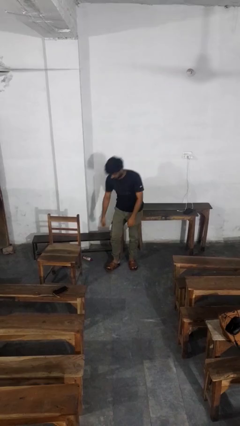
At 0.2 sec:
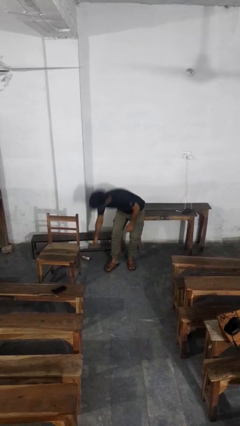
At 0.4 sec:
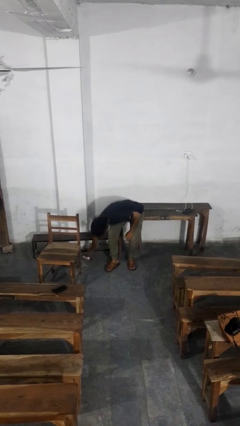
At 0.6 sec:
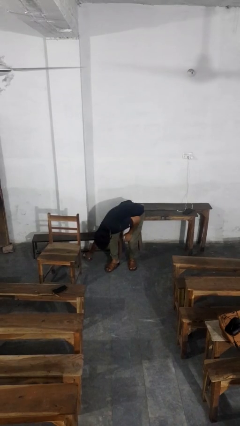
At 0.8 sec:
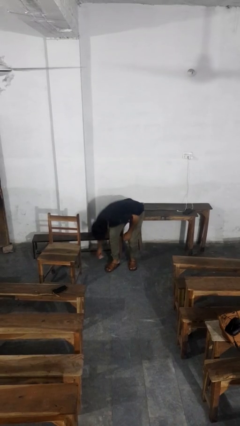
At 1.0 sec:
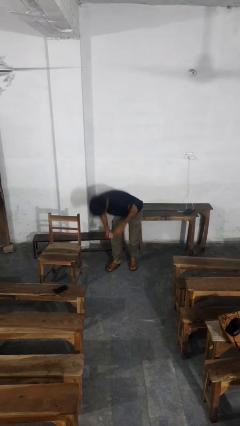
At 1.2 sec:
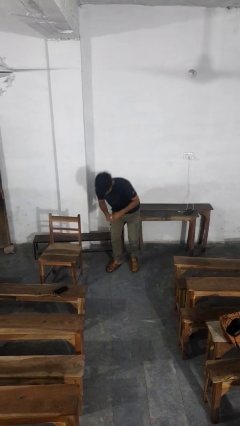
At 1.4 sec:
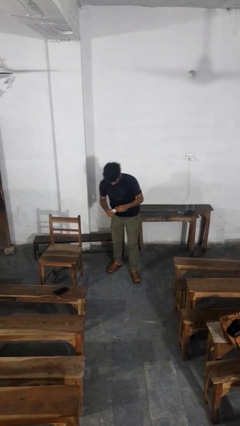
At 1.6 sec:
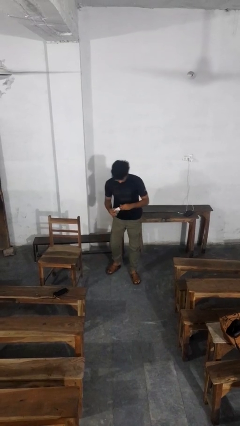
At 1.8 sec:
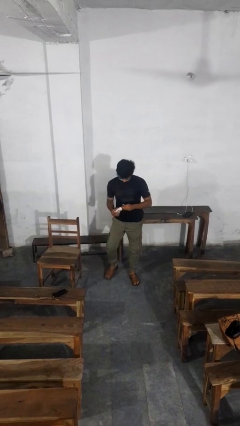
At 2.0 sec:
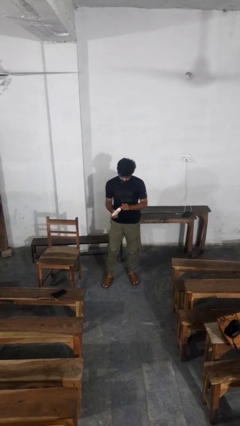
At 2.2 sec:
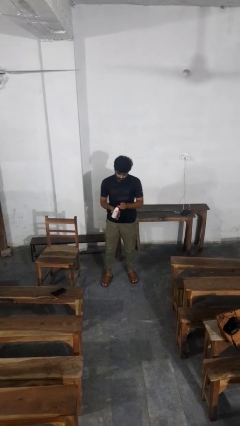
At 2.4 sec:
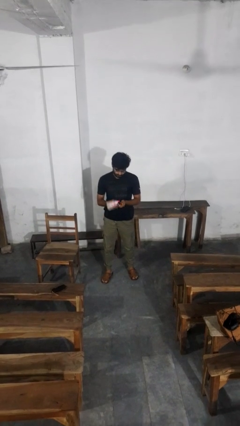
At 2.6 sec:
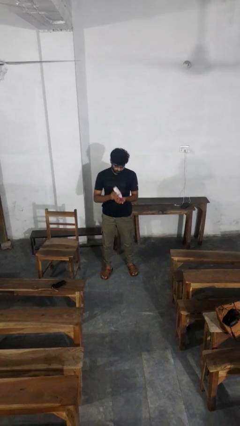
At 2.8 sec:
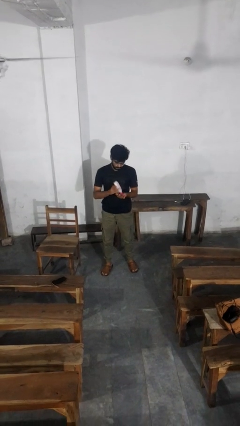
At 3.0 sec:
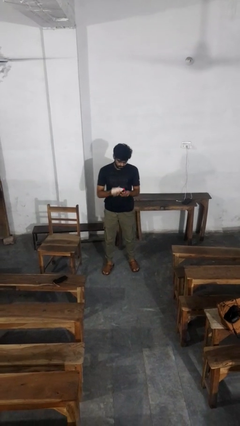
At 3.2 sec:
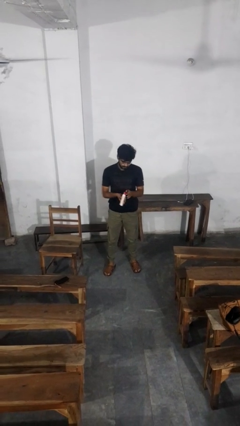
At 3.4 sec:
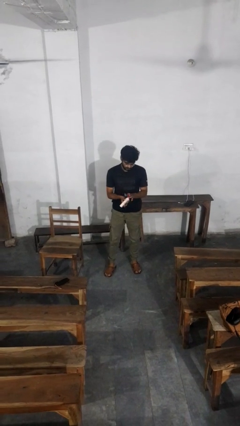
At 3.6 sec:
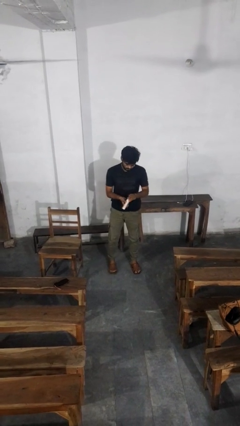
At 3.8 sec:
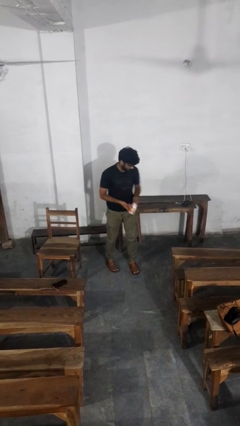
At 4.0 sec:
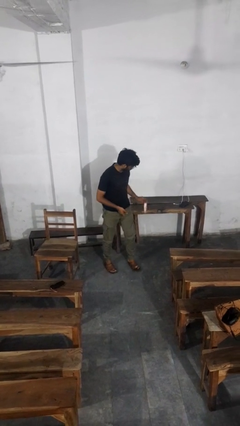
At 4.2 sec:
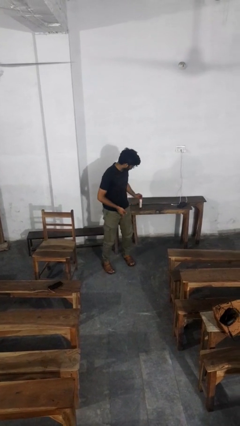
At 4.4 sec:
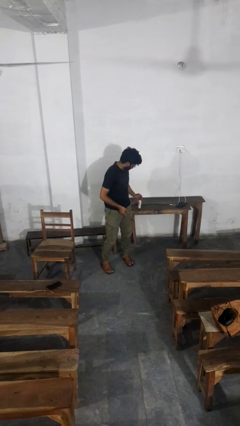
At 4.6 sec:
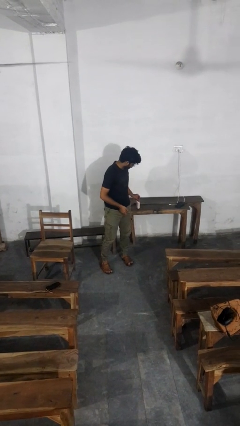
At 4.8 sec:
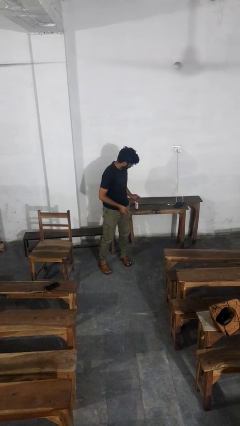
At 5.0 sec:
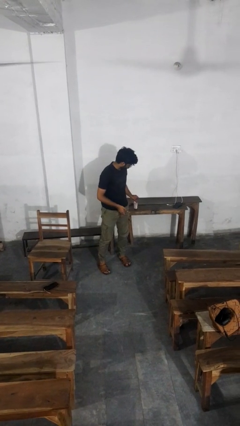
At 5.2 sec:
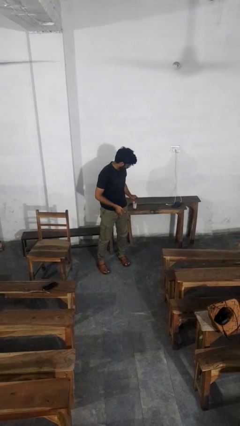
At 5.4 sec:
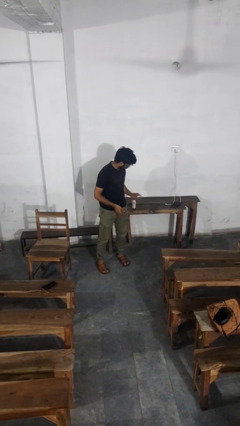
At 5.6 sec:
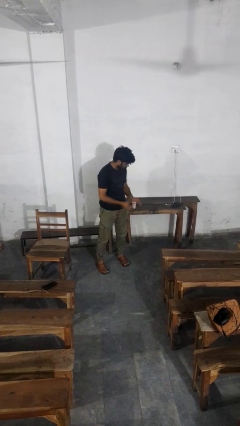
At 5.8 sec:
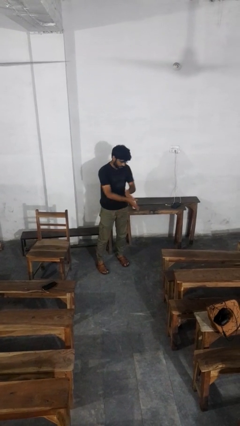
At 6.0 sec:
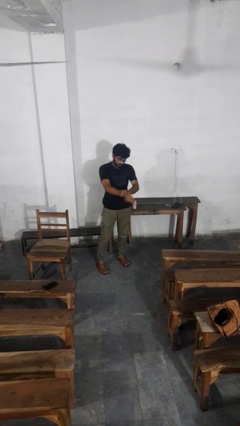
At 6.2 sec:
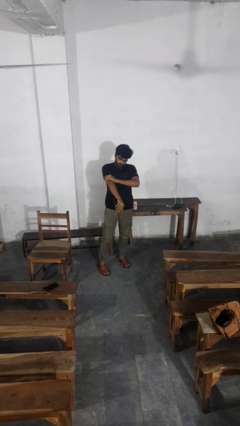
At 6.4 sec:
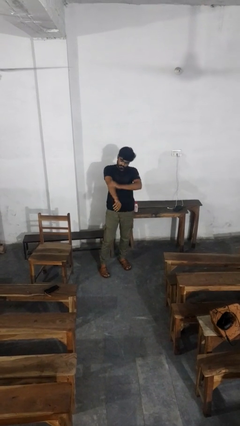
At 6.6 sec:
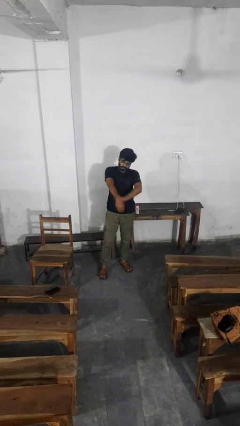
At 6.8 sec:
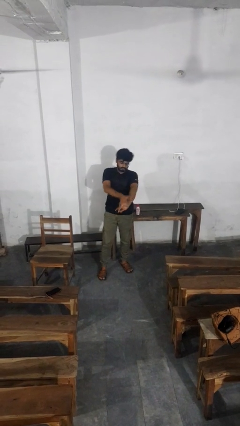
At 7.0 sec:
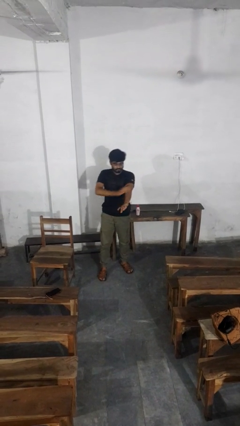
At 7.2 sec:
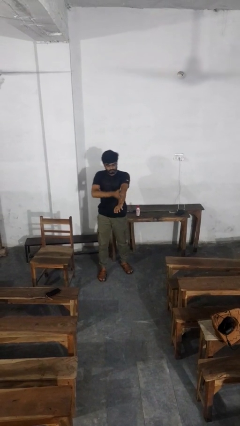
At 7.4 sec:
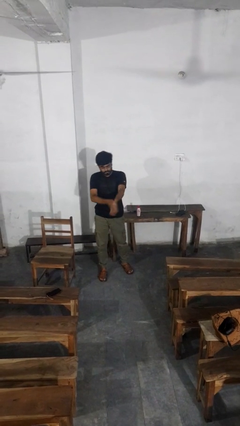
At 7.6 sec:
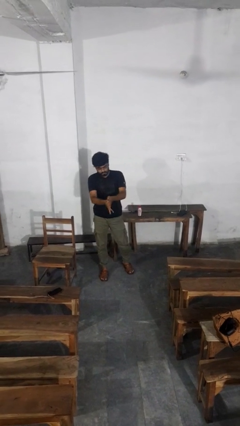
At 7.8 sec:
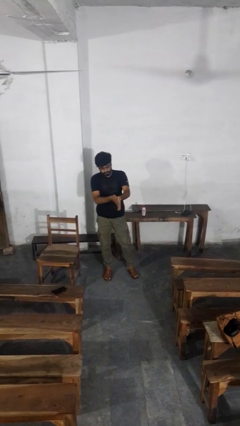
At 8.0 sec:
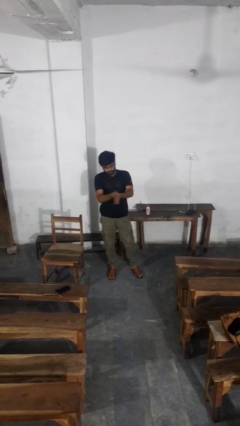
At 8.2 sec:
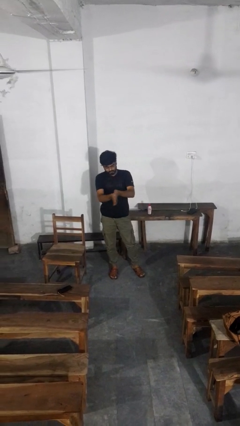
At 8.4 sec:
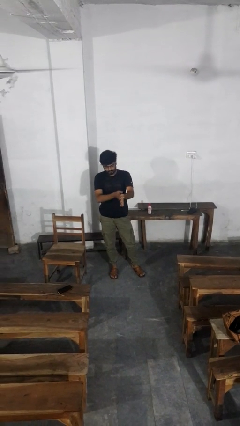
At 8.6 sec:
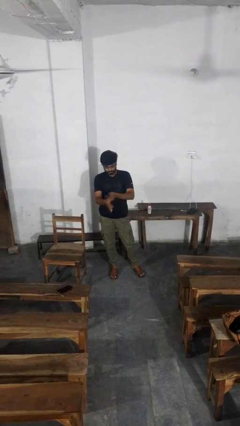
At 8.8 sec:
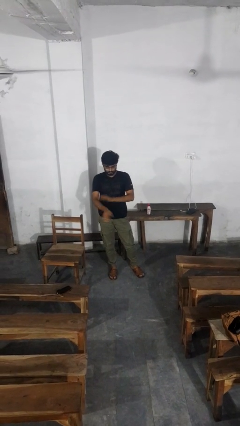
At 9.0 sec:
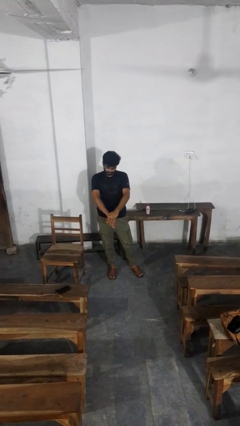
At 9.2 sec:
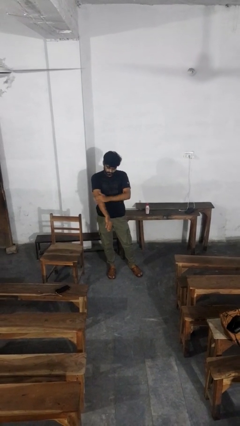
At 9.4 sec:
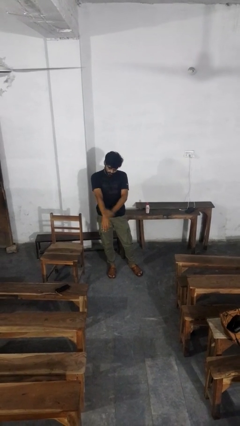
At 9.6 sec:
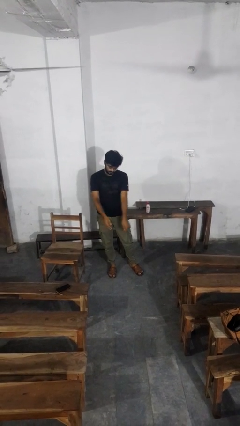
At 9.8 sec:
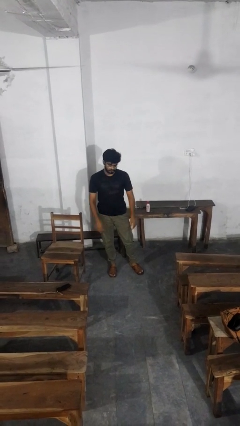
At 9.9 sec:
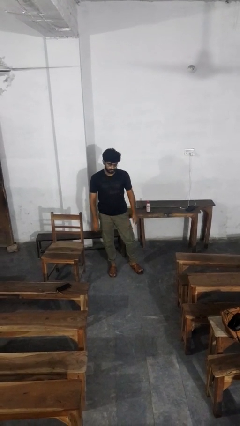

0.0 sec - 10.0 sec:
person applies sunscreen

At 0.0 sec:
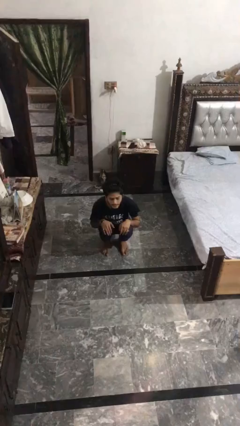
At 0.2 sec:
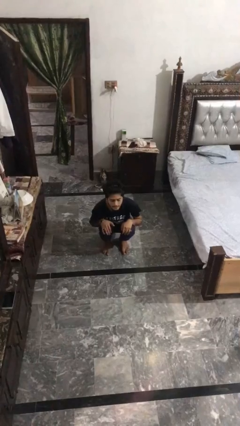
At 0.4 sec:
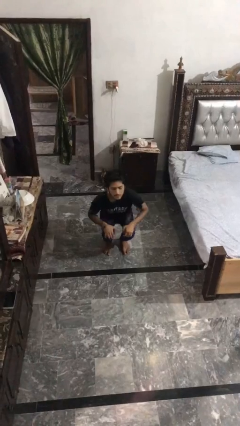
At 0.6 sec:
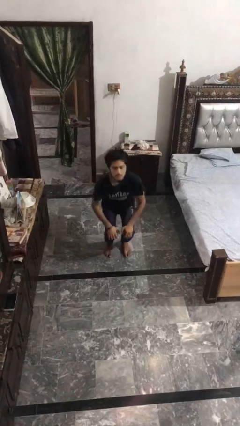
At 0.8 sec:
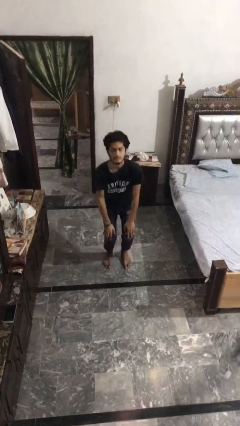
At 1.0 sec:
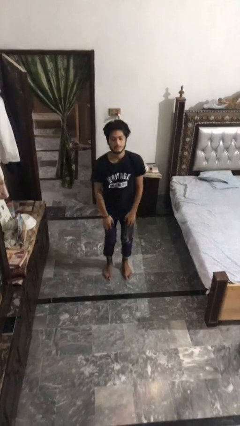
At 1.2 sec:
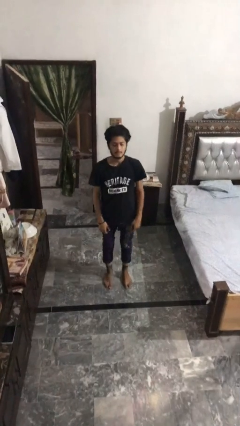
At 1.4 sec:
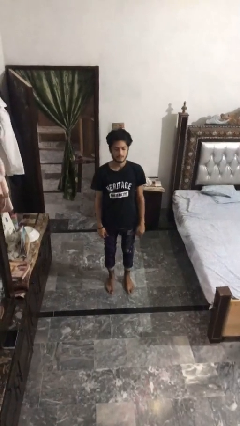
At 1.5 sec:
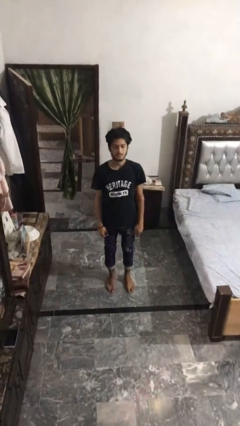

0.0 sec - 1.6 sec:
person stands up

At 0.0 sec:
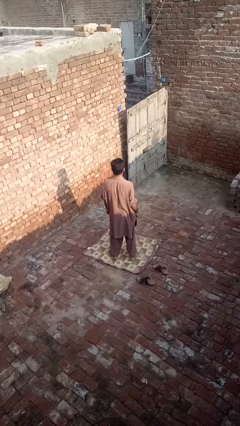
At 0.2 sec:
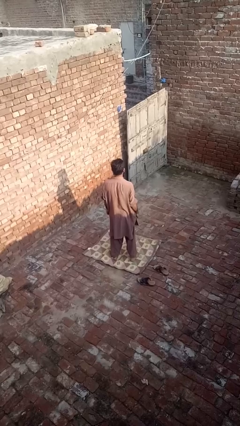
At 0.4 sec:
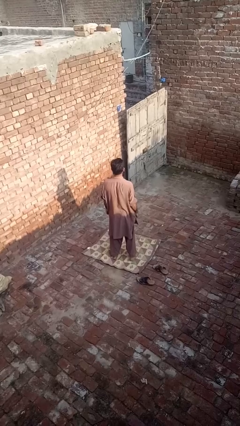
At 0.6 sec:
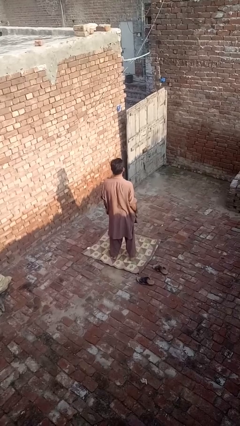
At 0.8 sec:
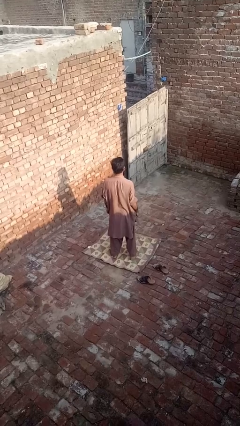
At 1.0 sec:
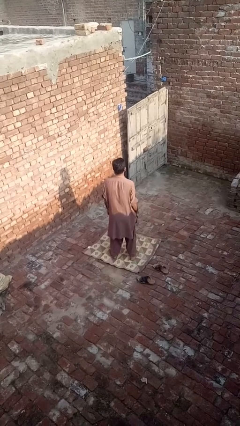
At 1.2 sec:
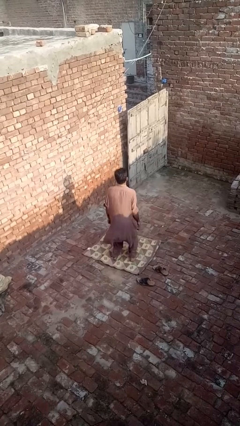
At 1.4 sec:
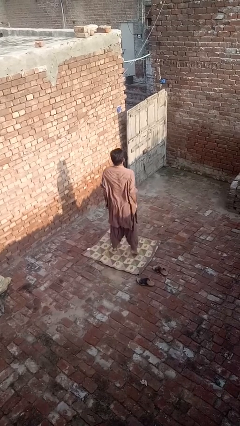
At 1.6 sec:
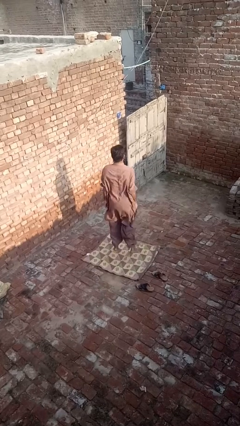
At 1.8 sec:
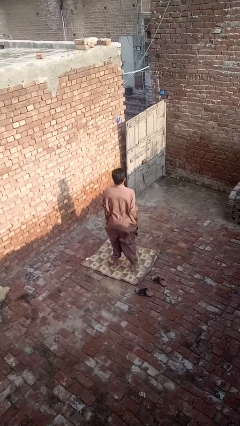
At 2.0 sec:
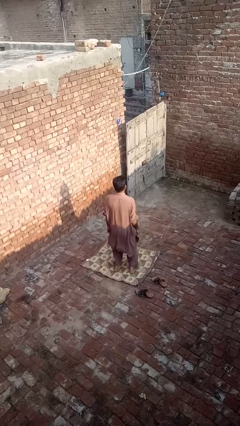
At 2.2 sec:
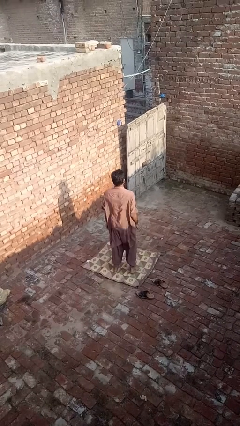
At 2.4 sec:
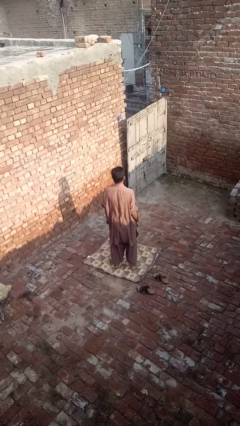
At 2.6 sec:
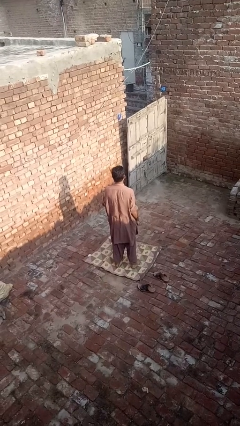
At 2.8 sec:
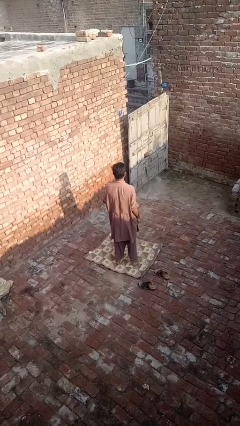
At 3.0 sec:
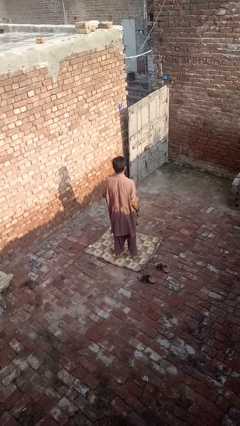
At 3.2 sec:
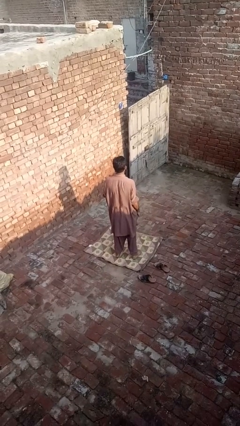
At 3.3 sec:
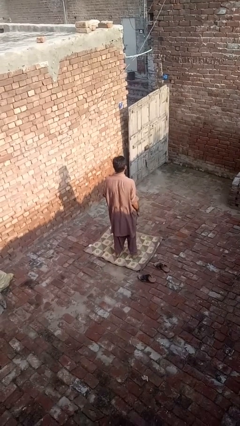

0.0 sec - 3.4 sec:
person jumps

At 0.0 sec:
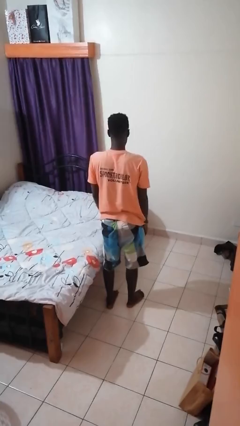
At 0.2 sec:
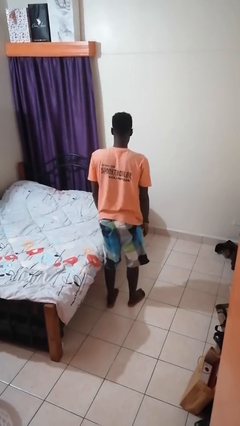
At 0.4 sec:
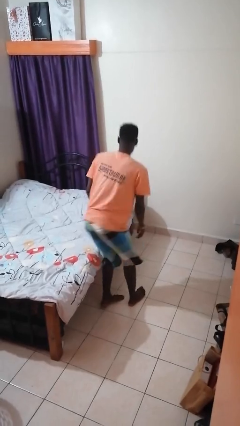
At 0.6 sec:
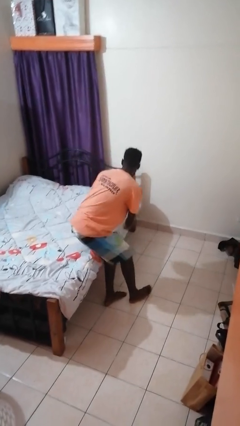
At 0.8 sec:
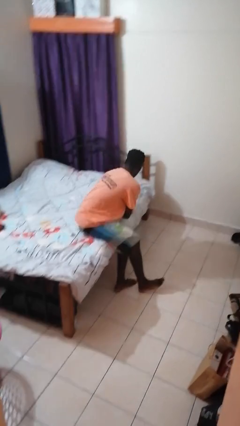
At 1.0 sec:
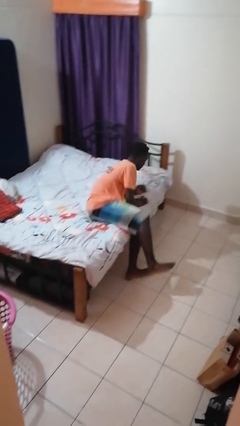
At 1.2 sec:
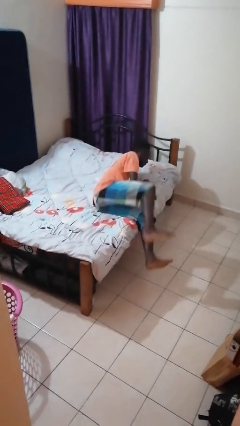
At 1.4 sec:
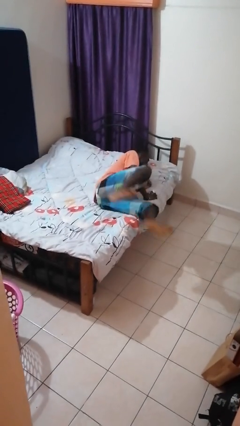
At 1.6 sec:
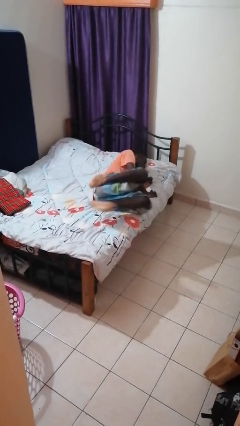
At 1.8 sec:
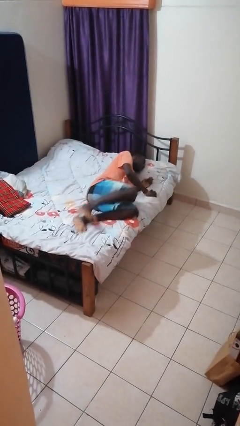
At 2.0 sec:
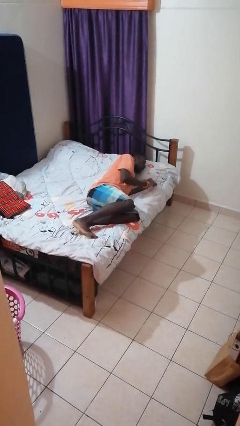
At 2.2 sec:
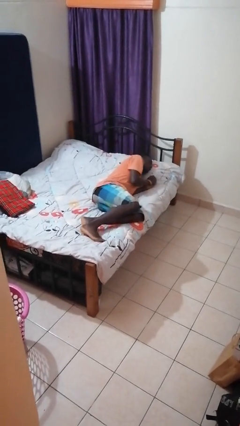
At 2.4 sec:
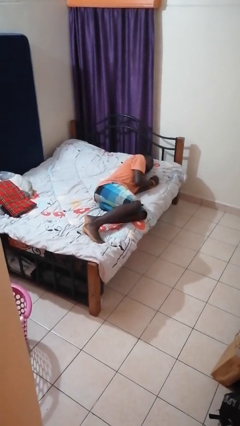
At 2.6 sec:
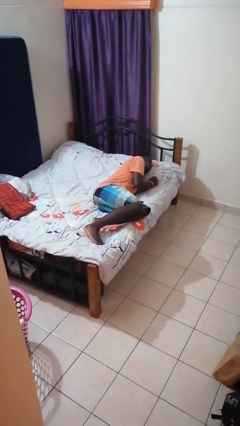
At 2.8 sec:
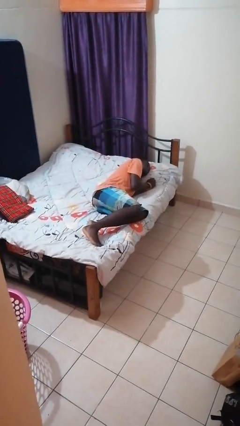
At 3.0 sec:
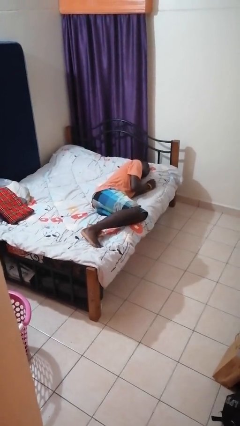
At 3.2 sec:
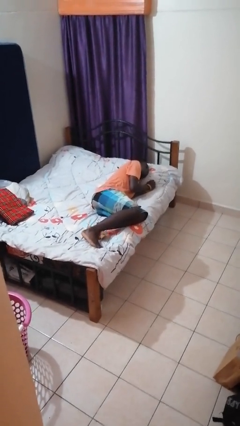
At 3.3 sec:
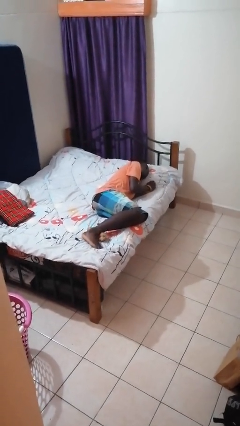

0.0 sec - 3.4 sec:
person lies down on bed
